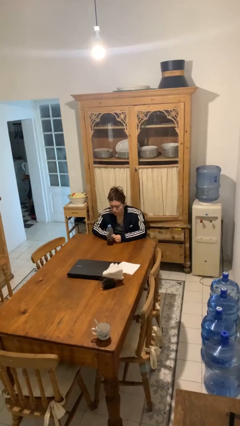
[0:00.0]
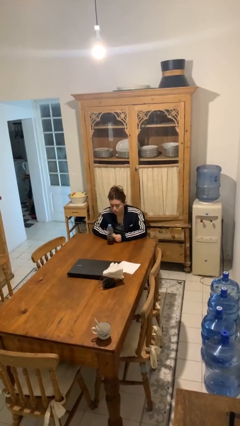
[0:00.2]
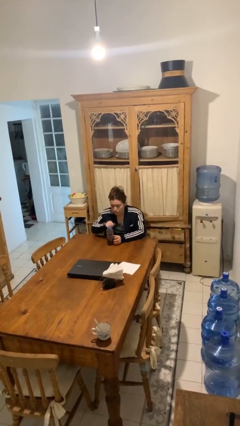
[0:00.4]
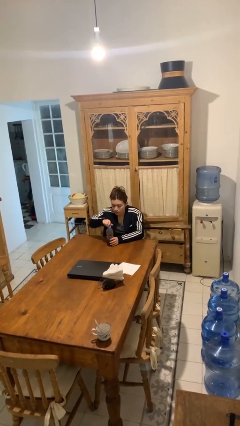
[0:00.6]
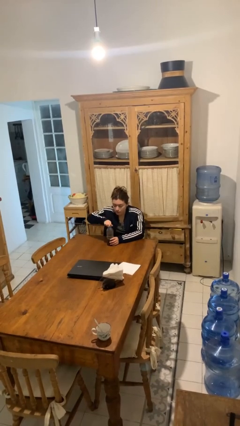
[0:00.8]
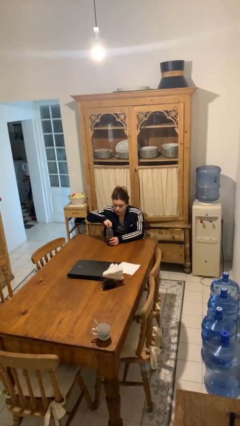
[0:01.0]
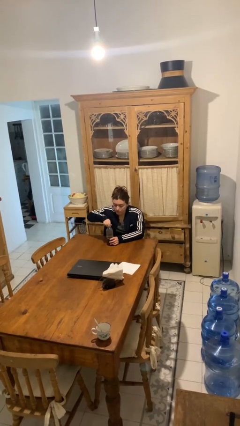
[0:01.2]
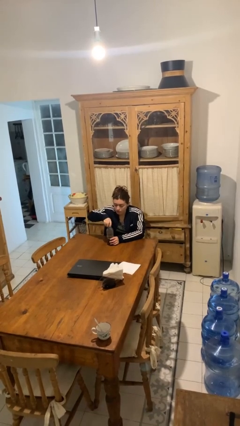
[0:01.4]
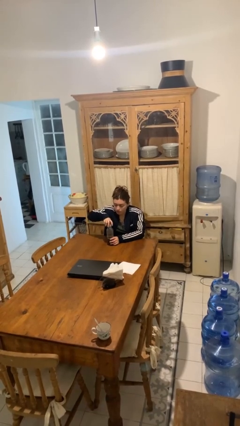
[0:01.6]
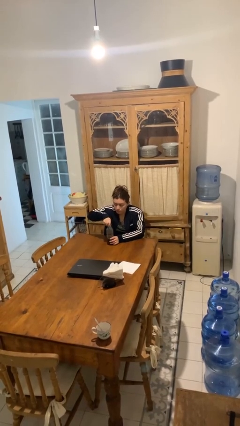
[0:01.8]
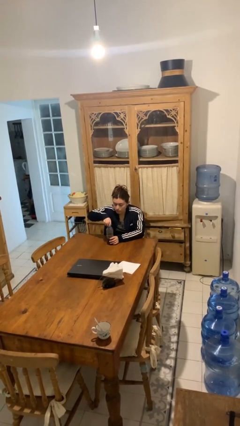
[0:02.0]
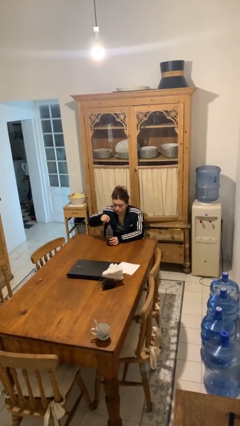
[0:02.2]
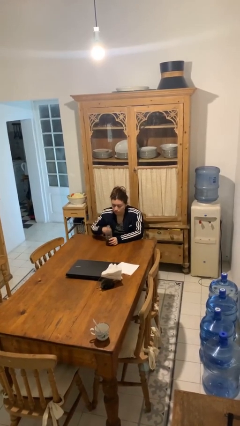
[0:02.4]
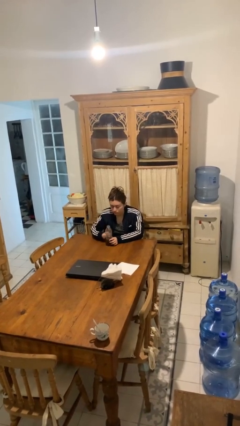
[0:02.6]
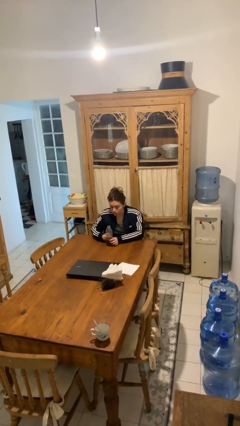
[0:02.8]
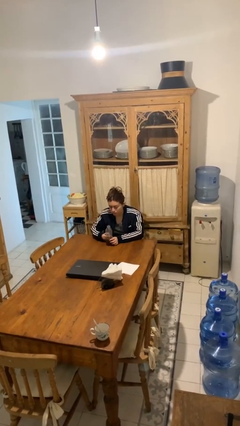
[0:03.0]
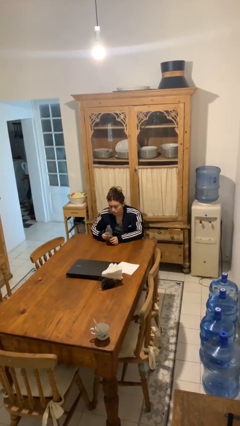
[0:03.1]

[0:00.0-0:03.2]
person unscrews lid from bottle

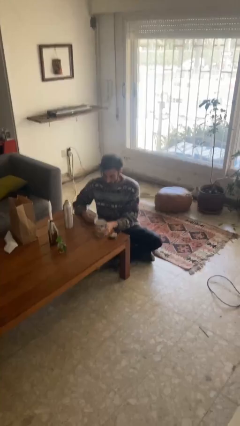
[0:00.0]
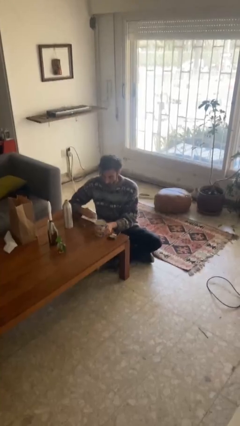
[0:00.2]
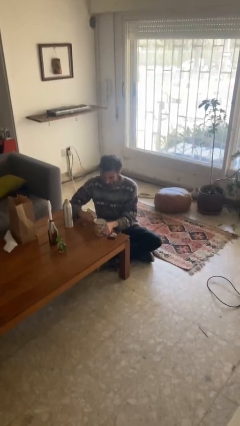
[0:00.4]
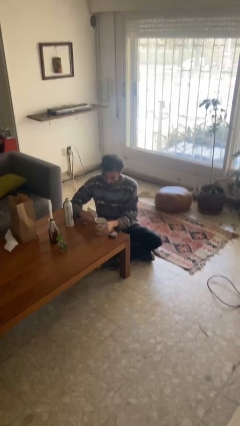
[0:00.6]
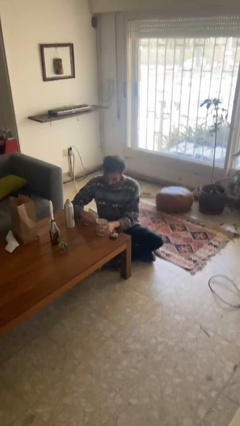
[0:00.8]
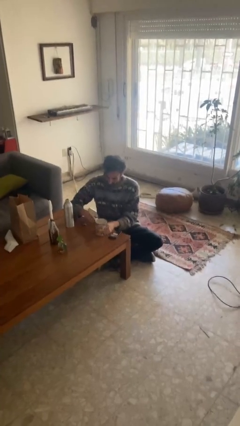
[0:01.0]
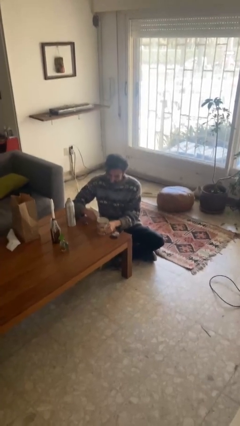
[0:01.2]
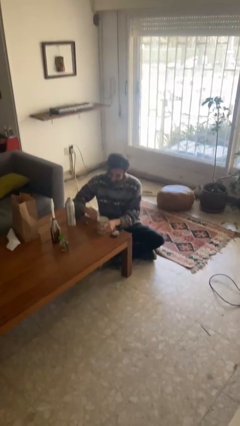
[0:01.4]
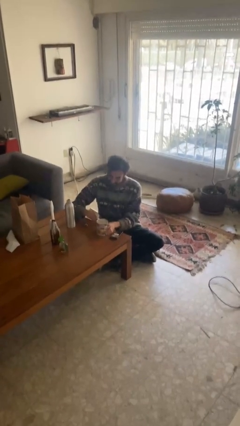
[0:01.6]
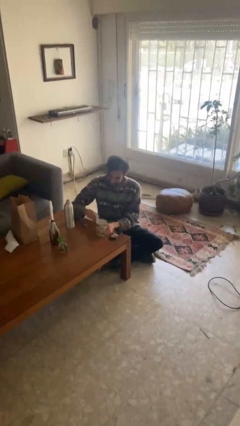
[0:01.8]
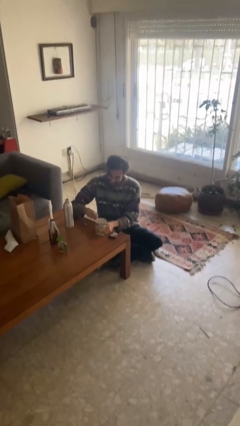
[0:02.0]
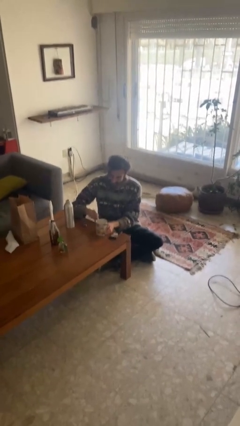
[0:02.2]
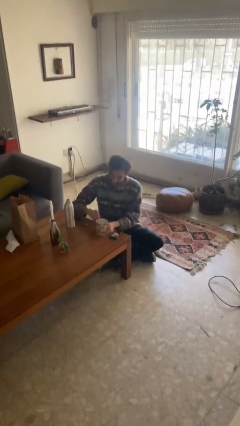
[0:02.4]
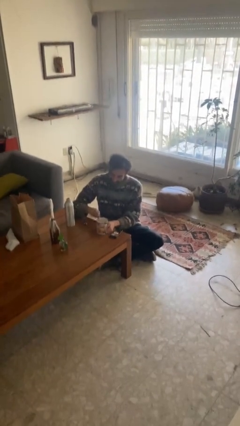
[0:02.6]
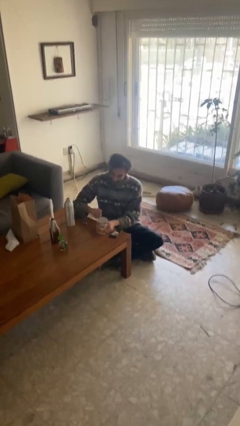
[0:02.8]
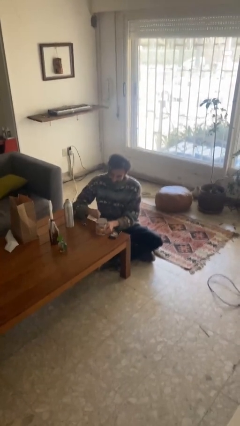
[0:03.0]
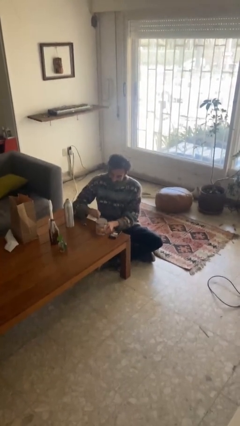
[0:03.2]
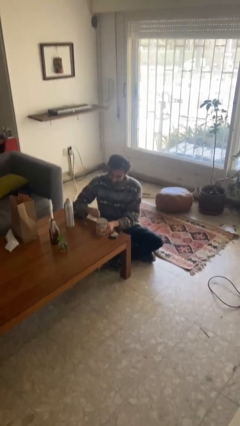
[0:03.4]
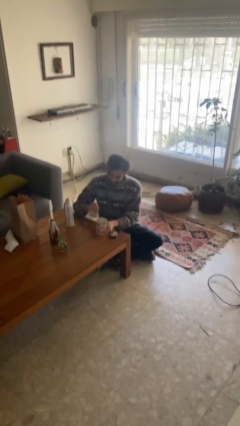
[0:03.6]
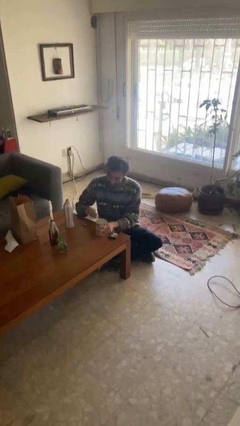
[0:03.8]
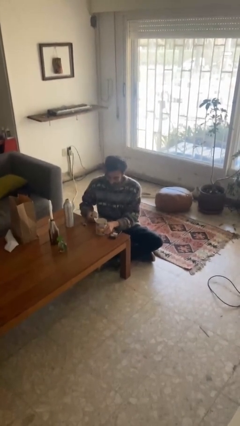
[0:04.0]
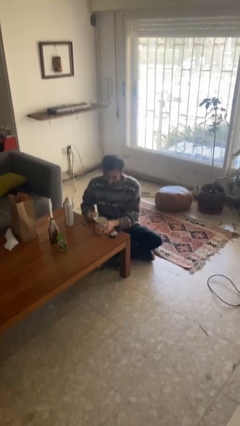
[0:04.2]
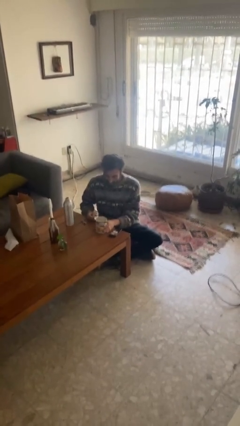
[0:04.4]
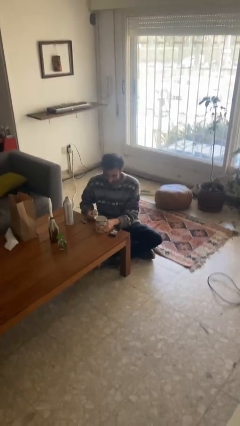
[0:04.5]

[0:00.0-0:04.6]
person opens can with can opener

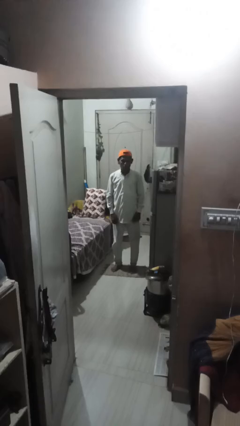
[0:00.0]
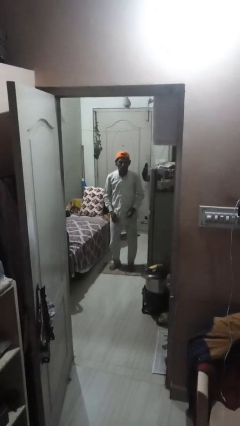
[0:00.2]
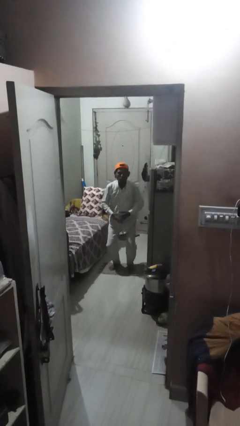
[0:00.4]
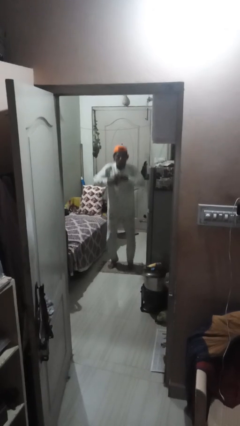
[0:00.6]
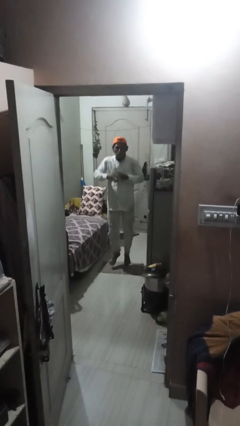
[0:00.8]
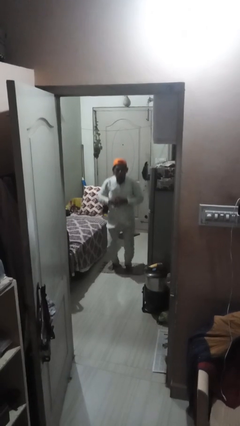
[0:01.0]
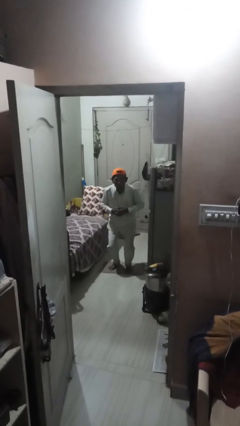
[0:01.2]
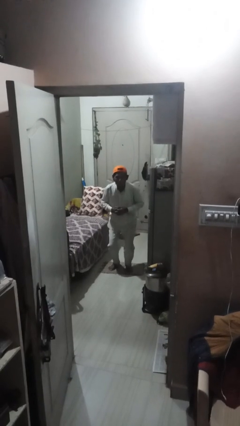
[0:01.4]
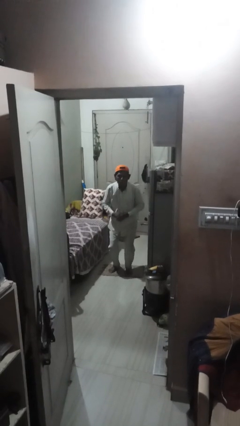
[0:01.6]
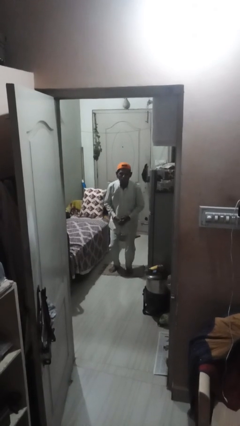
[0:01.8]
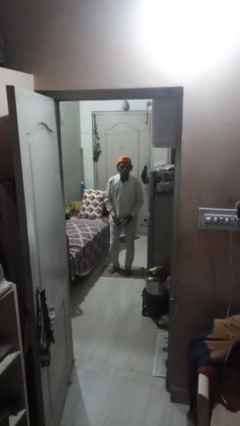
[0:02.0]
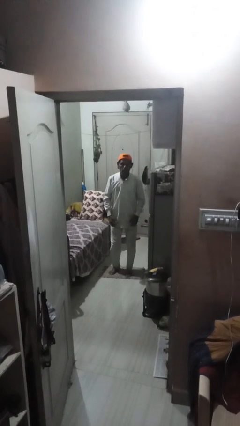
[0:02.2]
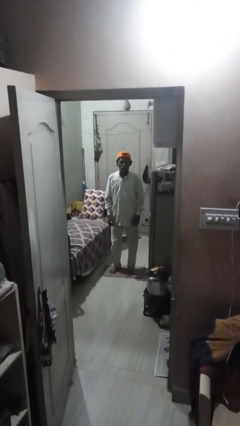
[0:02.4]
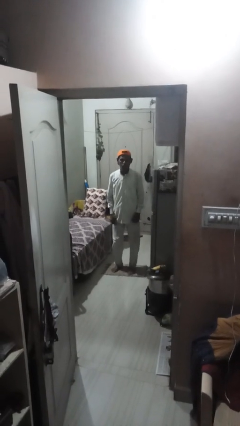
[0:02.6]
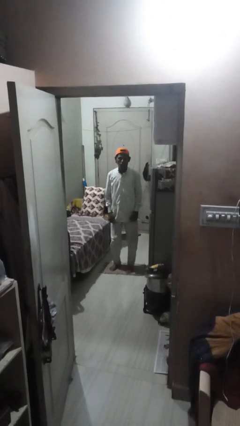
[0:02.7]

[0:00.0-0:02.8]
person jumps

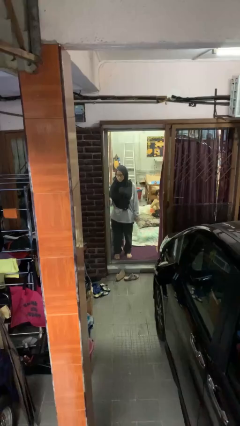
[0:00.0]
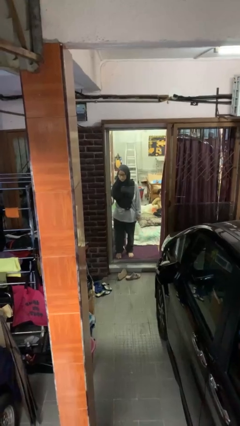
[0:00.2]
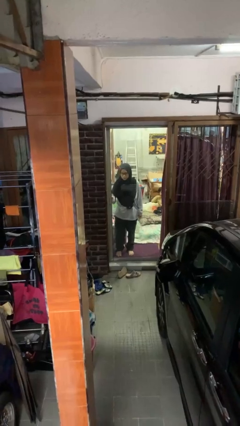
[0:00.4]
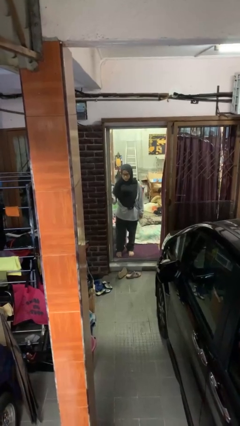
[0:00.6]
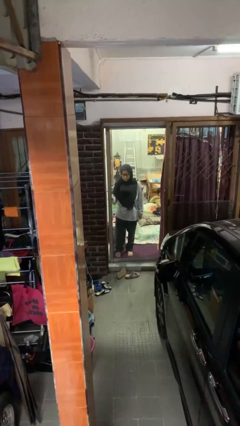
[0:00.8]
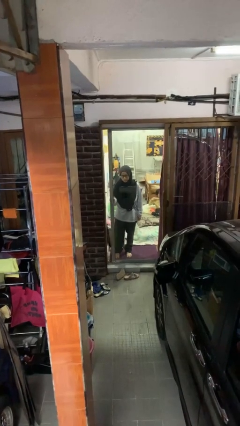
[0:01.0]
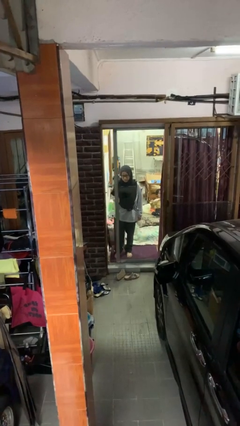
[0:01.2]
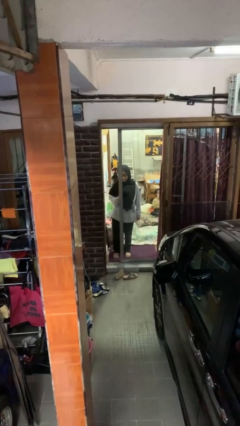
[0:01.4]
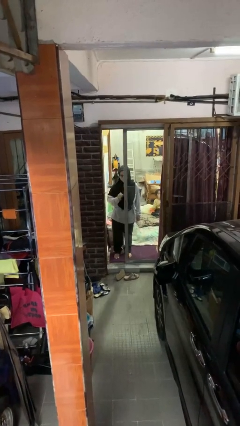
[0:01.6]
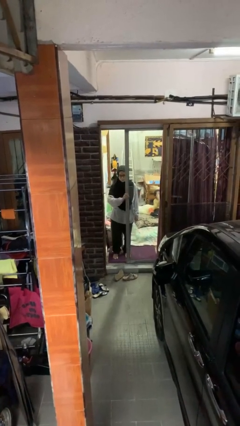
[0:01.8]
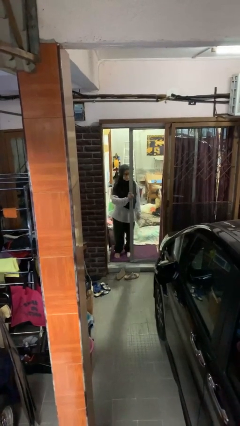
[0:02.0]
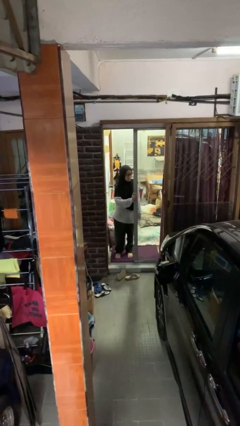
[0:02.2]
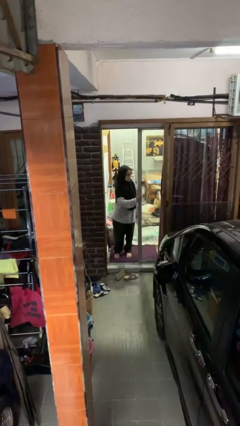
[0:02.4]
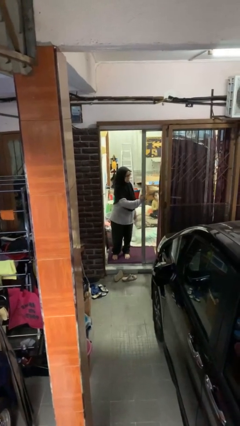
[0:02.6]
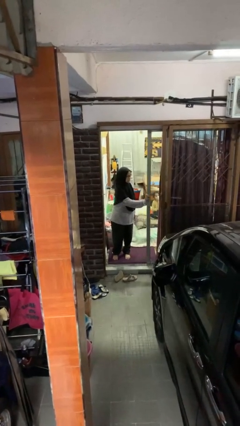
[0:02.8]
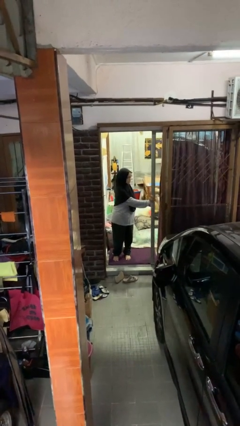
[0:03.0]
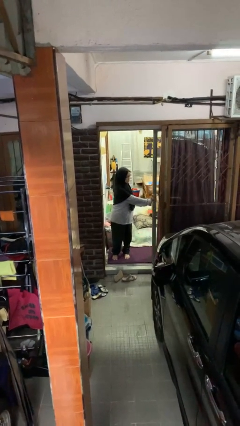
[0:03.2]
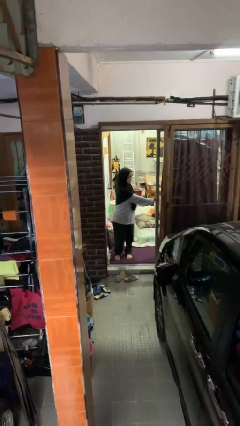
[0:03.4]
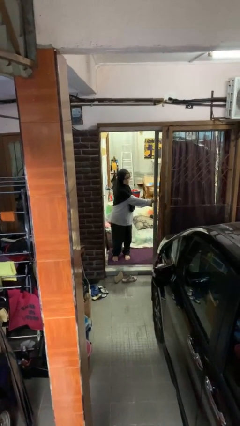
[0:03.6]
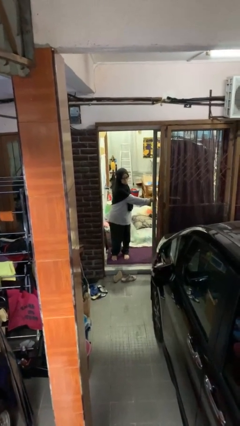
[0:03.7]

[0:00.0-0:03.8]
person opens sliding door

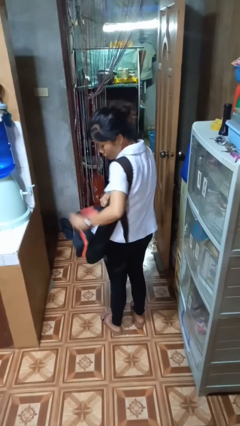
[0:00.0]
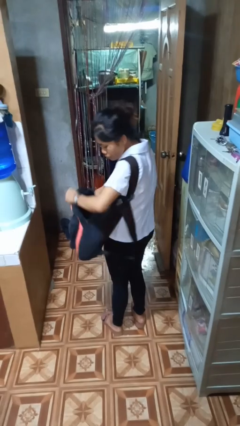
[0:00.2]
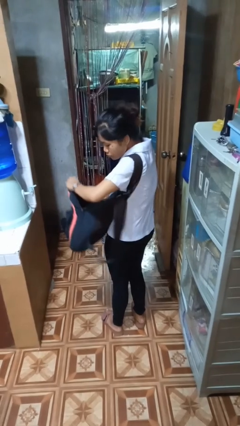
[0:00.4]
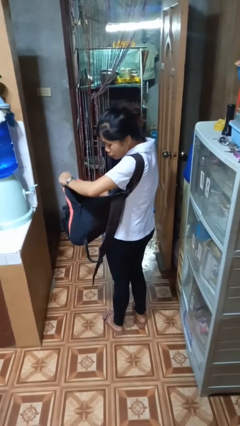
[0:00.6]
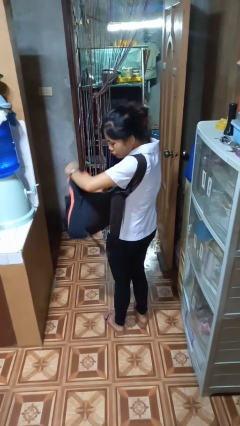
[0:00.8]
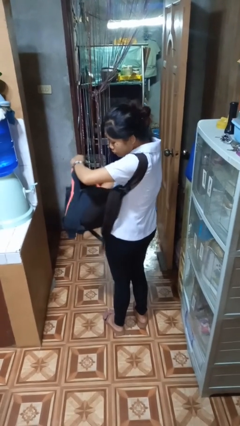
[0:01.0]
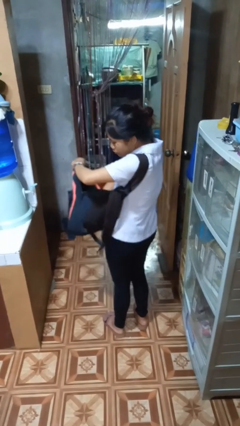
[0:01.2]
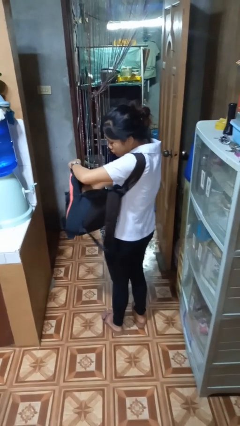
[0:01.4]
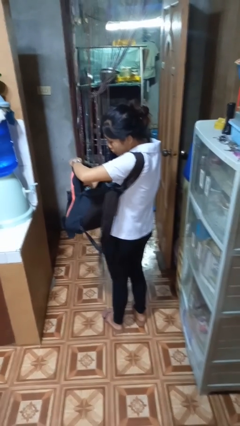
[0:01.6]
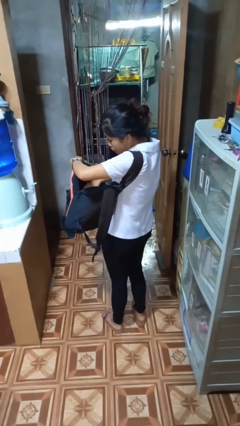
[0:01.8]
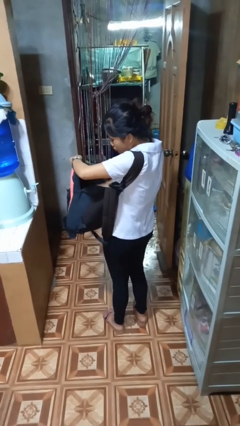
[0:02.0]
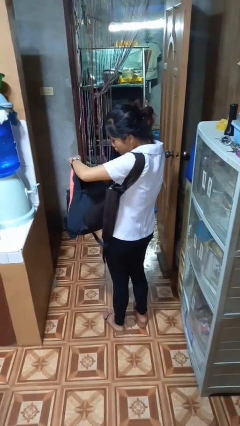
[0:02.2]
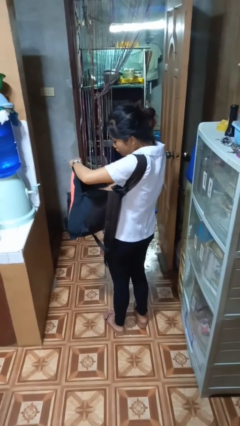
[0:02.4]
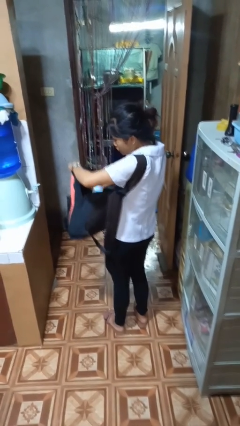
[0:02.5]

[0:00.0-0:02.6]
person searches in backpack

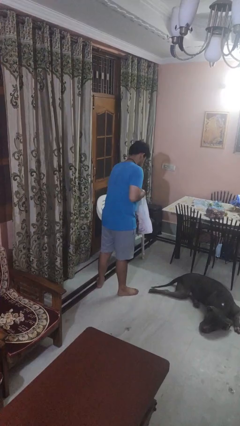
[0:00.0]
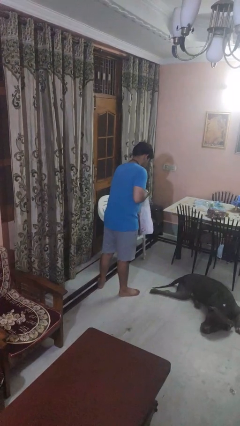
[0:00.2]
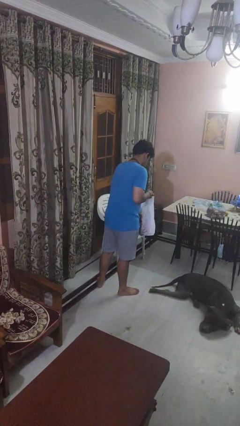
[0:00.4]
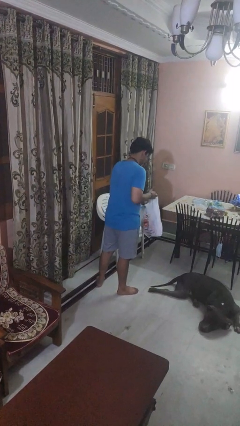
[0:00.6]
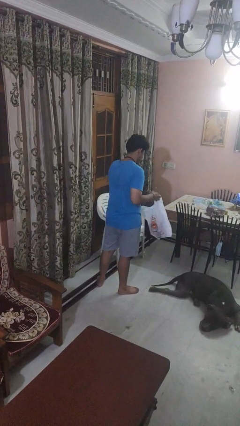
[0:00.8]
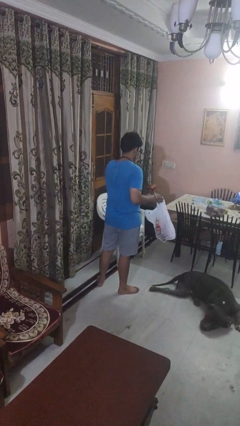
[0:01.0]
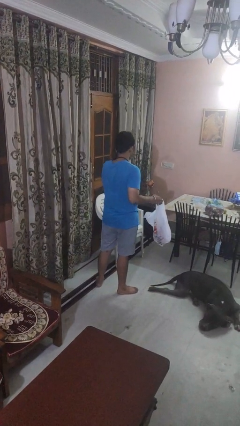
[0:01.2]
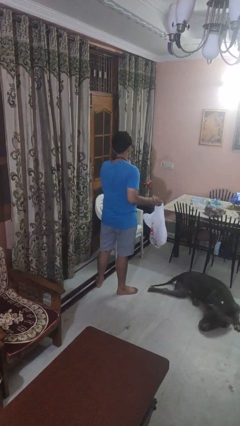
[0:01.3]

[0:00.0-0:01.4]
person takes object from bag
